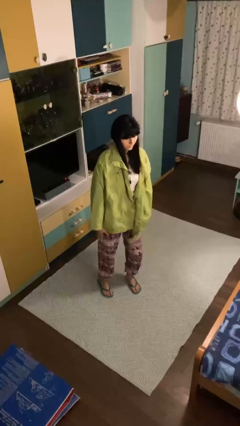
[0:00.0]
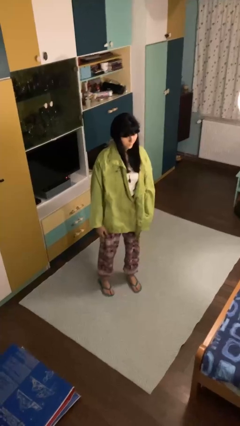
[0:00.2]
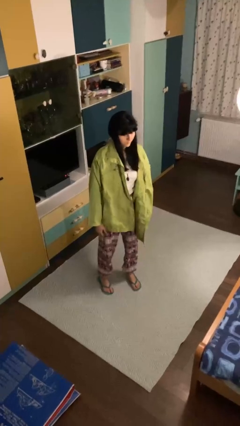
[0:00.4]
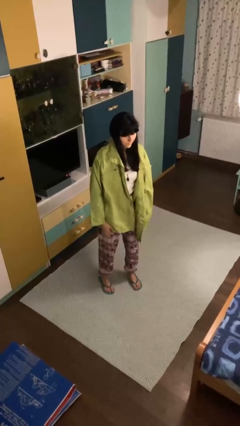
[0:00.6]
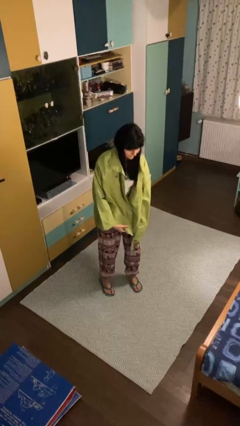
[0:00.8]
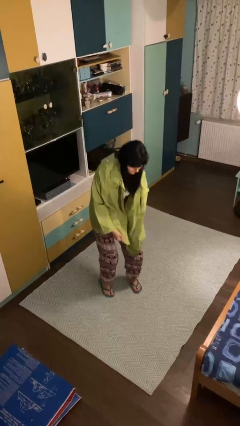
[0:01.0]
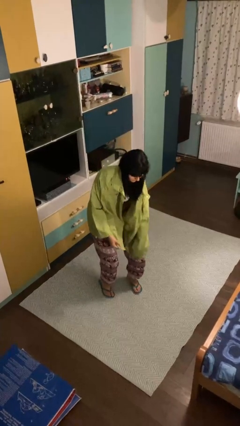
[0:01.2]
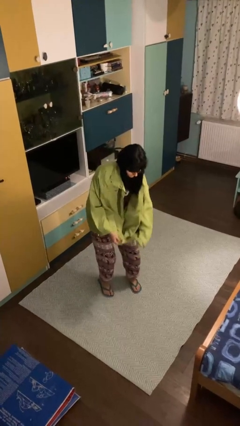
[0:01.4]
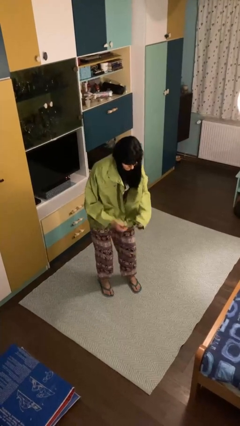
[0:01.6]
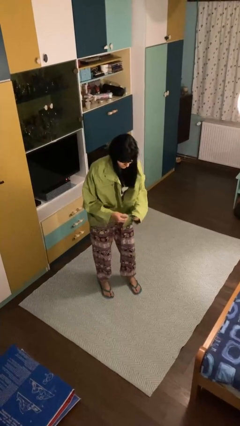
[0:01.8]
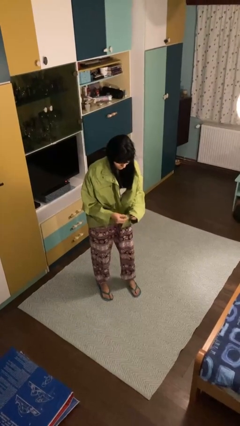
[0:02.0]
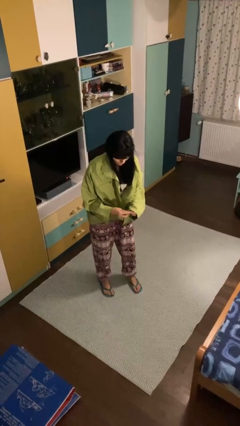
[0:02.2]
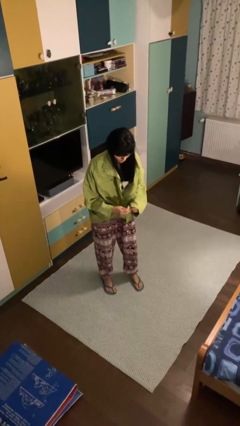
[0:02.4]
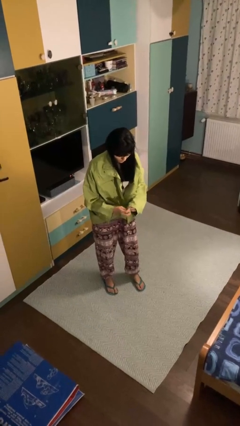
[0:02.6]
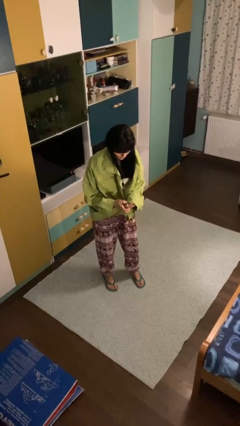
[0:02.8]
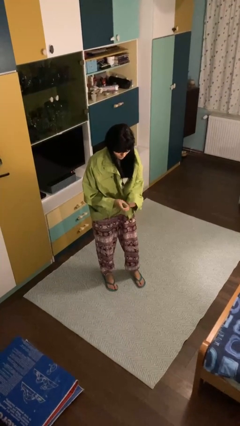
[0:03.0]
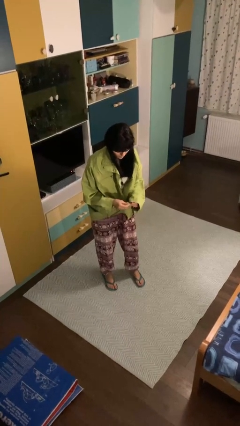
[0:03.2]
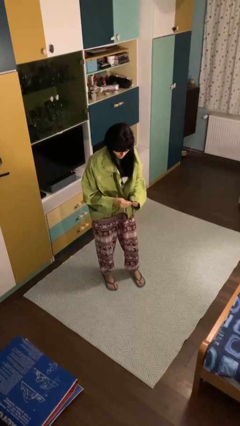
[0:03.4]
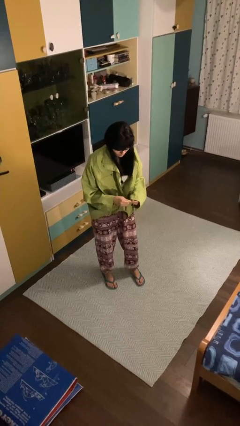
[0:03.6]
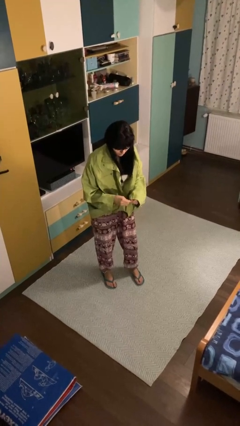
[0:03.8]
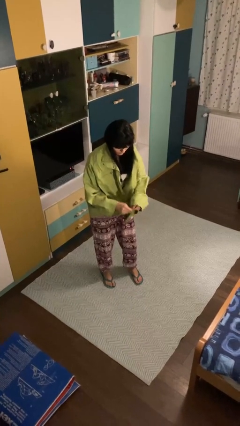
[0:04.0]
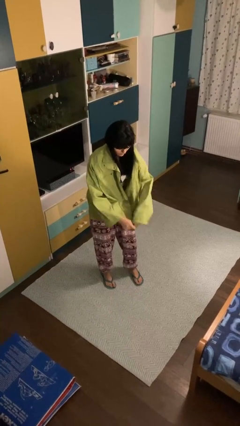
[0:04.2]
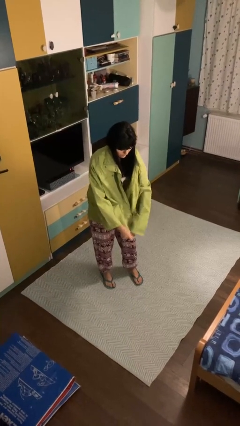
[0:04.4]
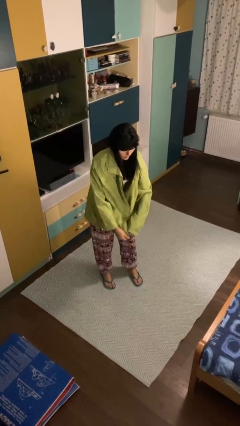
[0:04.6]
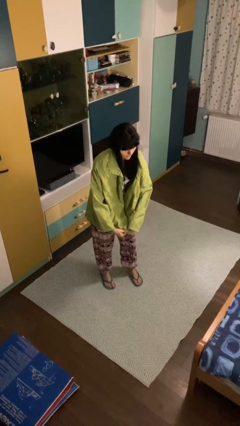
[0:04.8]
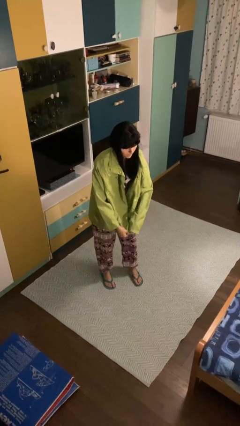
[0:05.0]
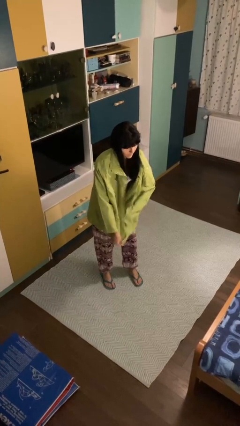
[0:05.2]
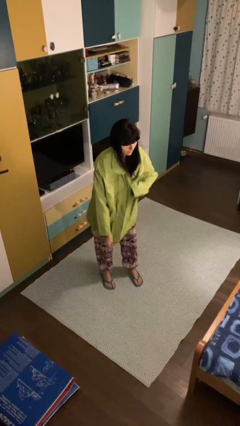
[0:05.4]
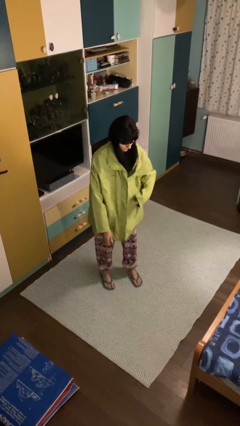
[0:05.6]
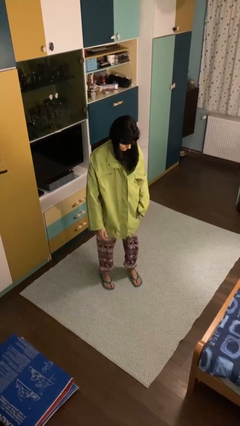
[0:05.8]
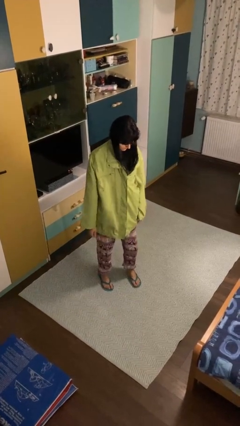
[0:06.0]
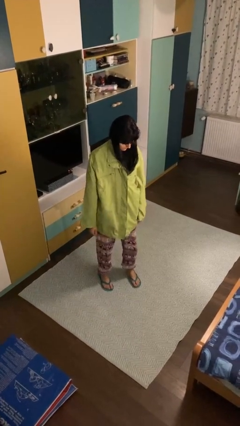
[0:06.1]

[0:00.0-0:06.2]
person zips up jacket

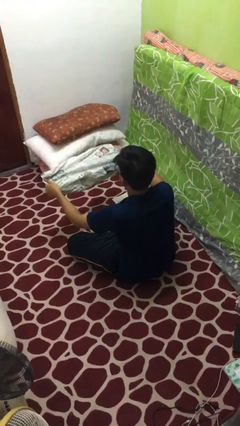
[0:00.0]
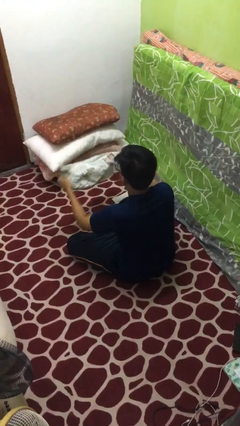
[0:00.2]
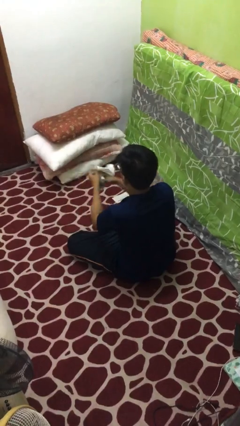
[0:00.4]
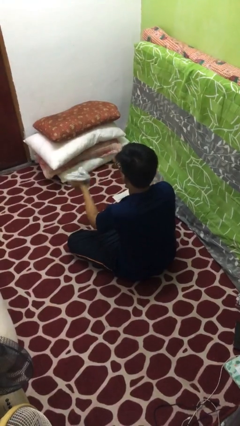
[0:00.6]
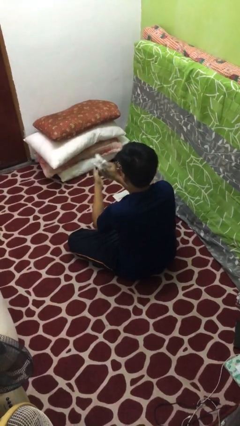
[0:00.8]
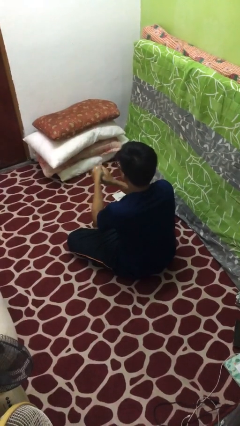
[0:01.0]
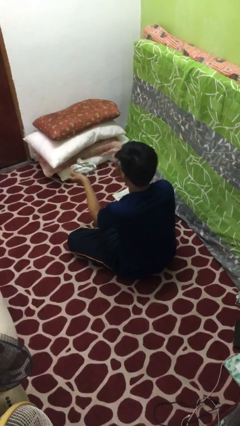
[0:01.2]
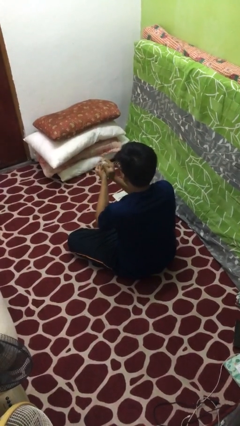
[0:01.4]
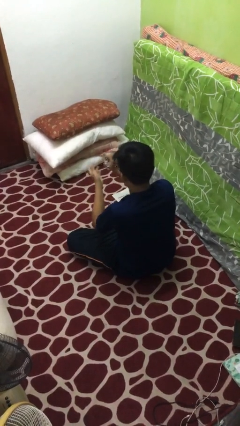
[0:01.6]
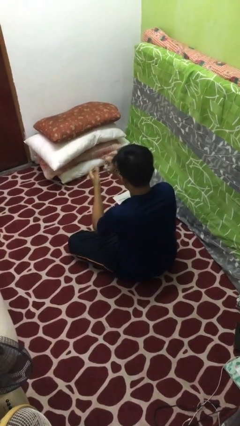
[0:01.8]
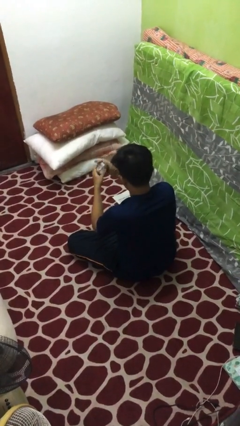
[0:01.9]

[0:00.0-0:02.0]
person crumples paper

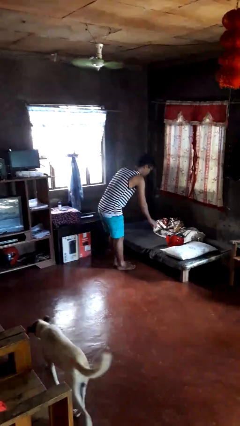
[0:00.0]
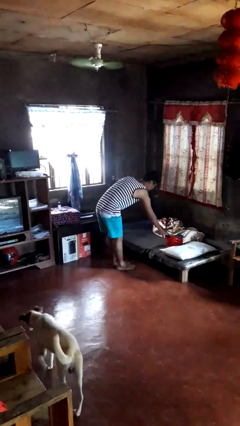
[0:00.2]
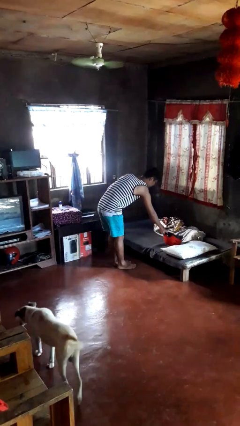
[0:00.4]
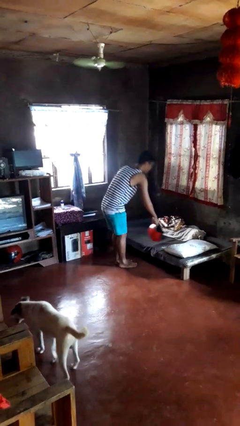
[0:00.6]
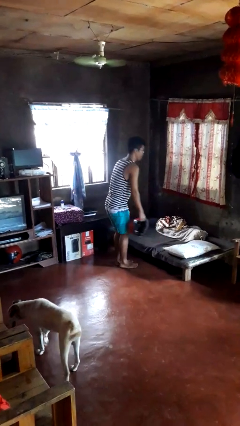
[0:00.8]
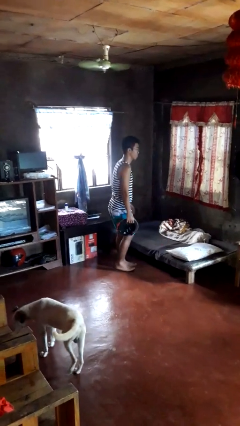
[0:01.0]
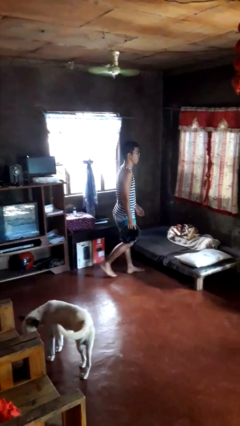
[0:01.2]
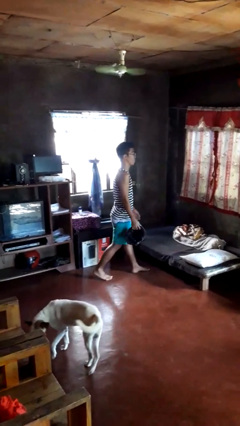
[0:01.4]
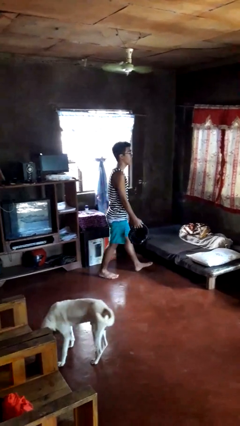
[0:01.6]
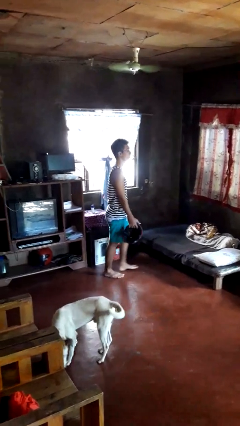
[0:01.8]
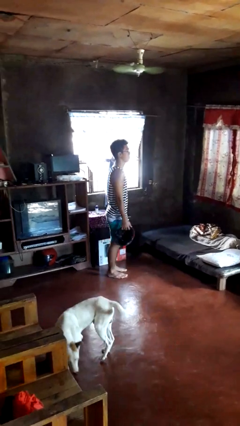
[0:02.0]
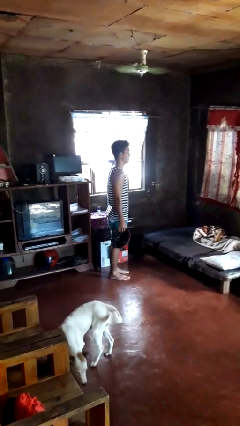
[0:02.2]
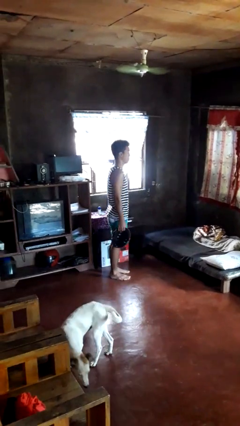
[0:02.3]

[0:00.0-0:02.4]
person picks up object from bed

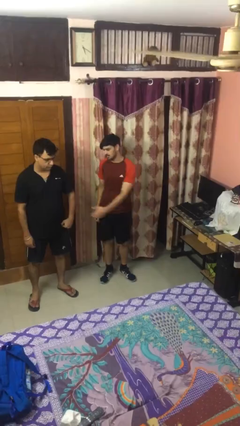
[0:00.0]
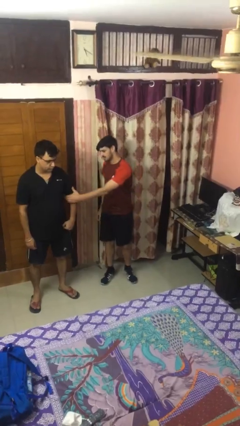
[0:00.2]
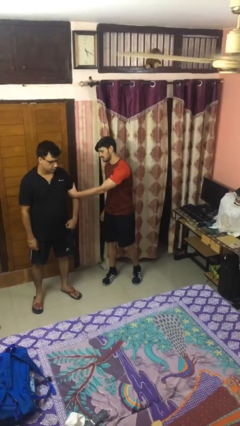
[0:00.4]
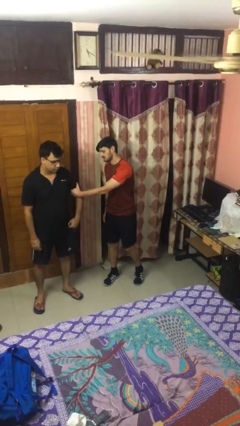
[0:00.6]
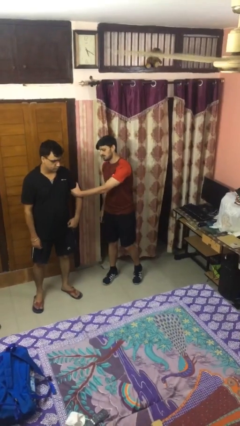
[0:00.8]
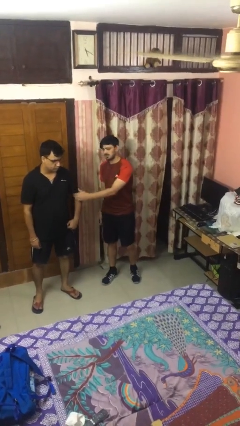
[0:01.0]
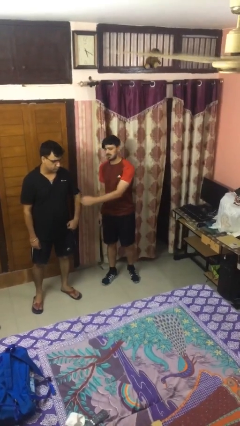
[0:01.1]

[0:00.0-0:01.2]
person grabs person by bicep

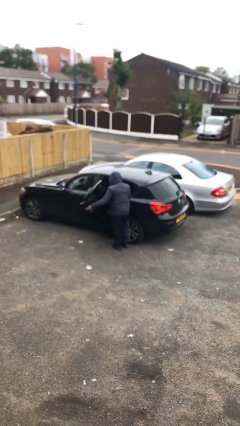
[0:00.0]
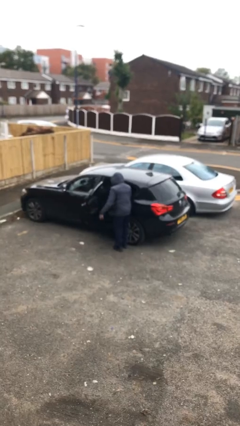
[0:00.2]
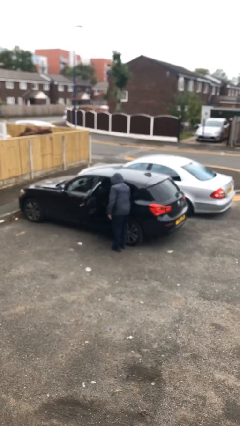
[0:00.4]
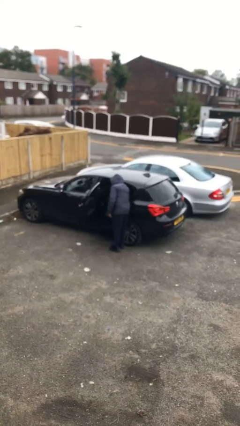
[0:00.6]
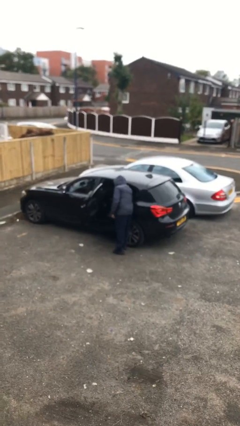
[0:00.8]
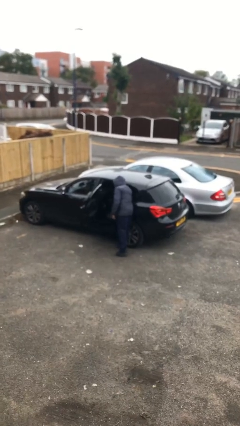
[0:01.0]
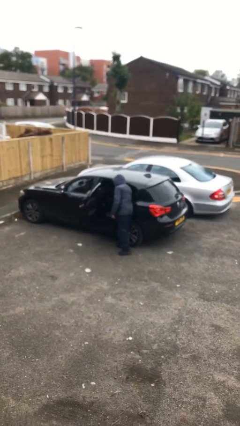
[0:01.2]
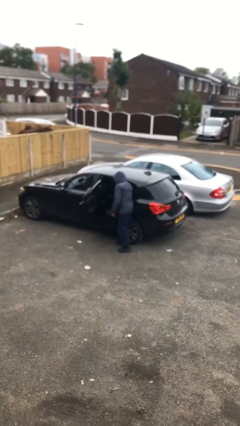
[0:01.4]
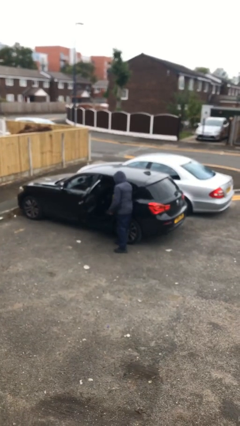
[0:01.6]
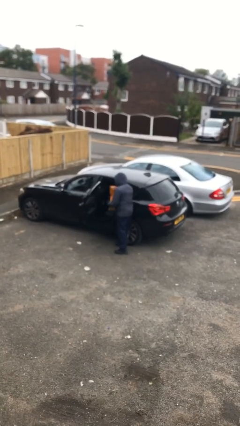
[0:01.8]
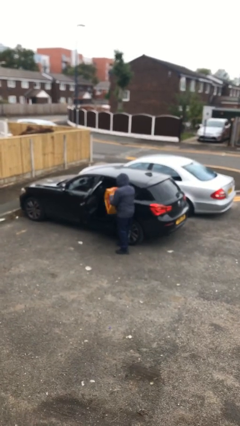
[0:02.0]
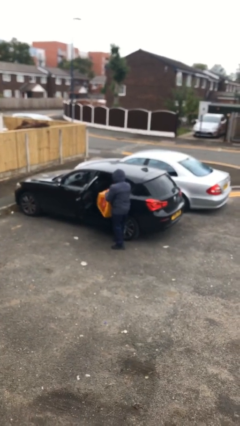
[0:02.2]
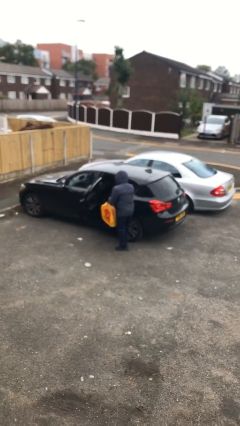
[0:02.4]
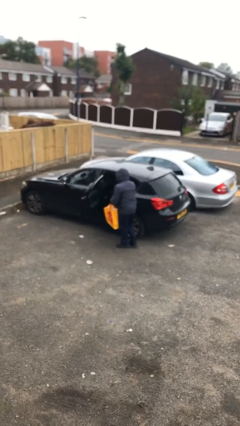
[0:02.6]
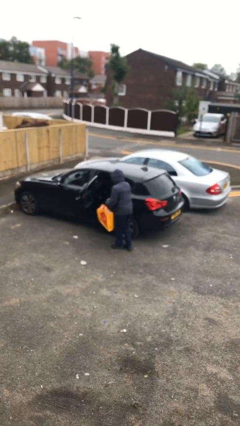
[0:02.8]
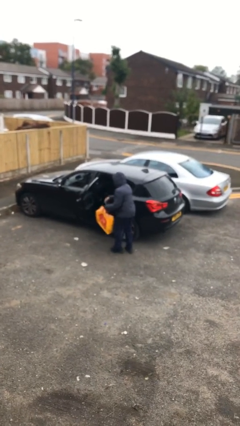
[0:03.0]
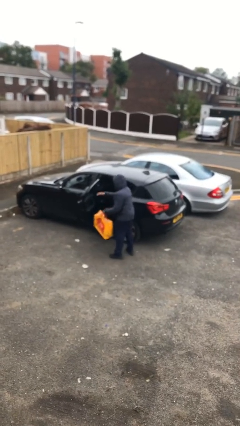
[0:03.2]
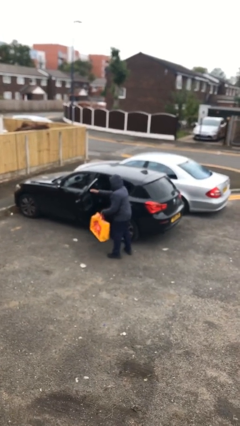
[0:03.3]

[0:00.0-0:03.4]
person unloads car

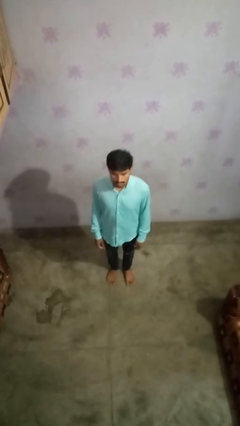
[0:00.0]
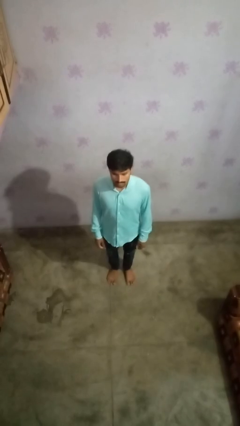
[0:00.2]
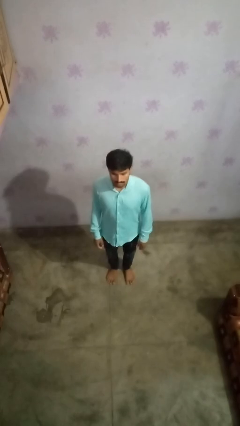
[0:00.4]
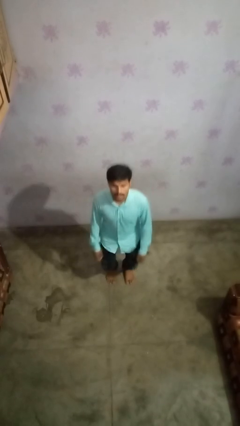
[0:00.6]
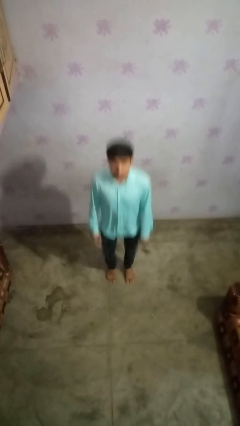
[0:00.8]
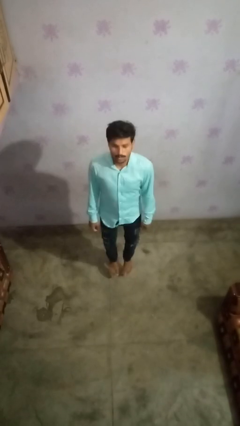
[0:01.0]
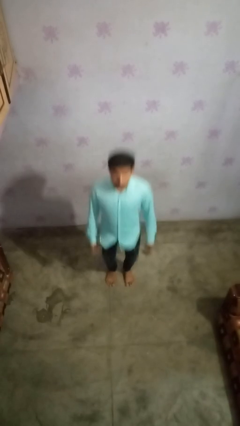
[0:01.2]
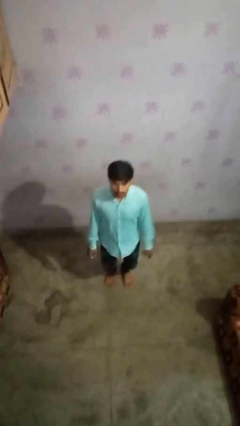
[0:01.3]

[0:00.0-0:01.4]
person jumps

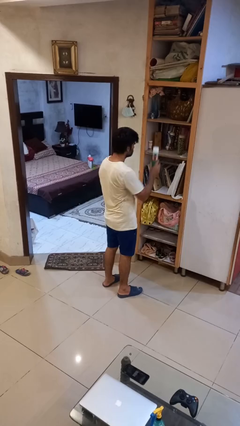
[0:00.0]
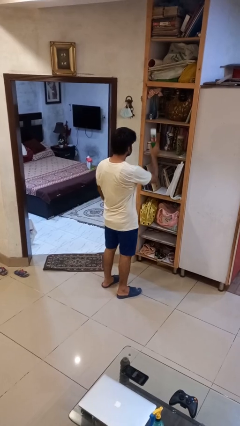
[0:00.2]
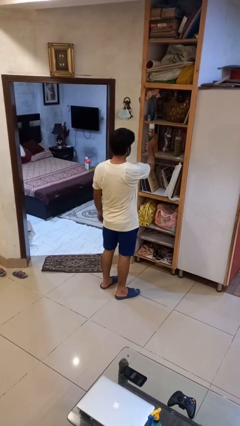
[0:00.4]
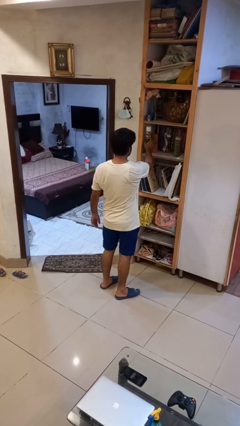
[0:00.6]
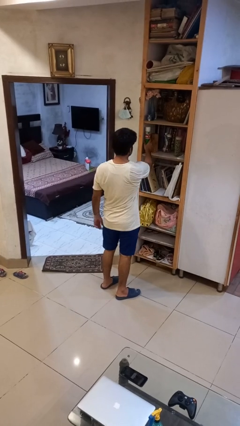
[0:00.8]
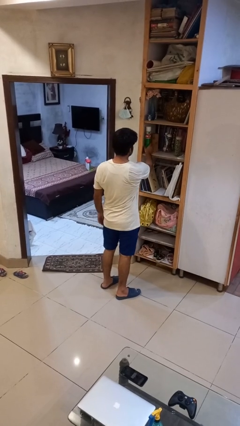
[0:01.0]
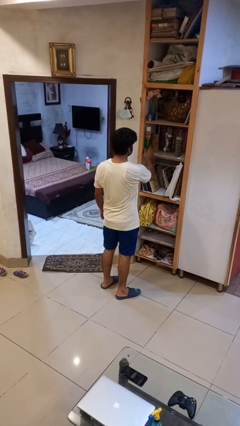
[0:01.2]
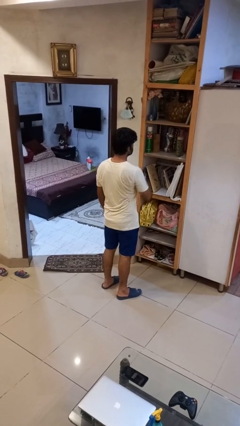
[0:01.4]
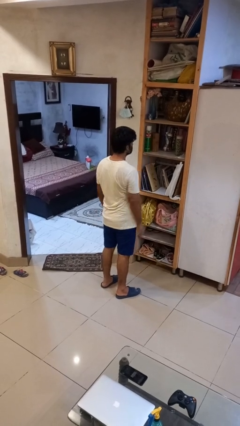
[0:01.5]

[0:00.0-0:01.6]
person puts down object into cabinet
